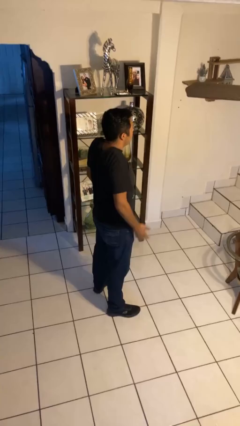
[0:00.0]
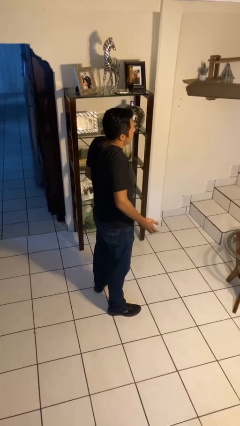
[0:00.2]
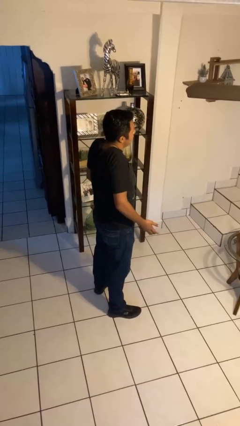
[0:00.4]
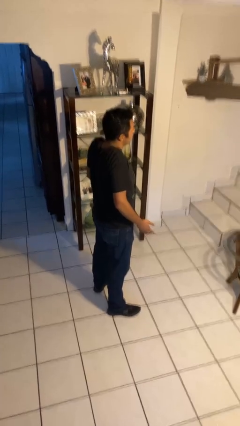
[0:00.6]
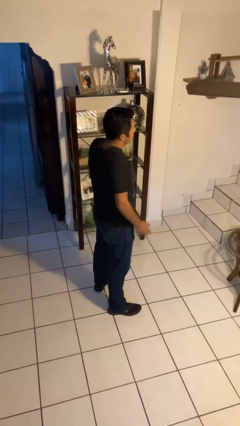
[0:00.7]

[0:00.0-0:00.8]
person shrugs

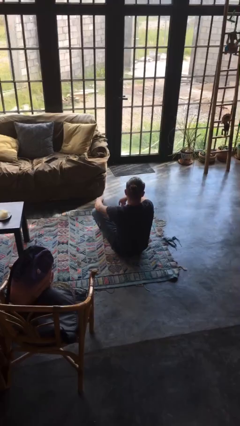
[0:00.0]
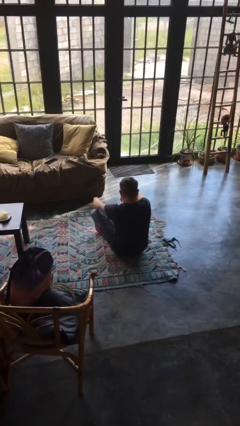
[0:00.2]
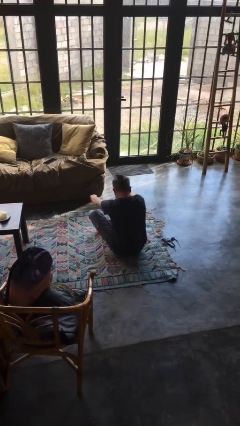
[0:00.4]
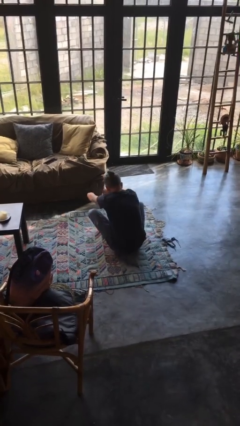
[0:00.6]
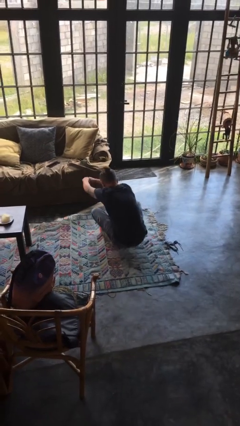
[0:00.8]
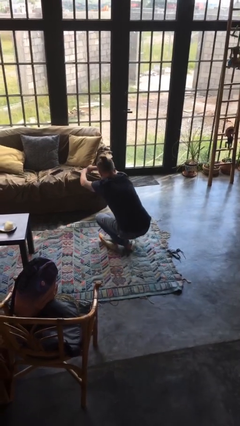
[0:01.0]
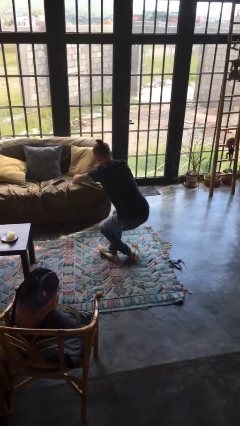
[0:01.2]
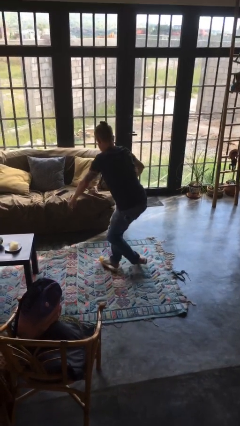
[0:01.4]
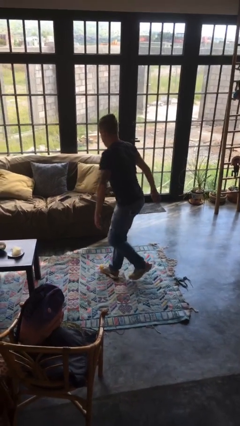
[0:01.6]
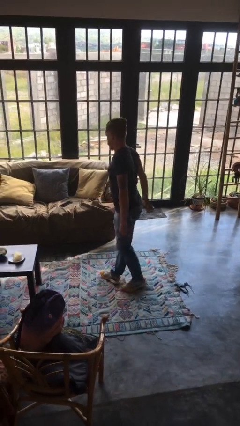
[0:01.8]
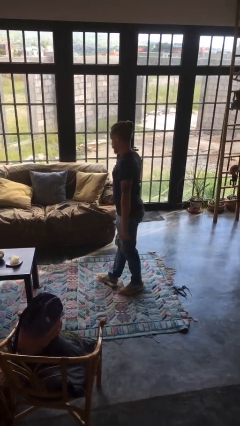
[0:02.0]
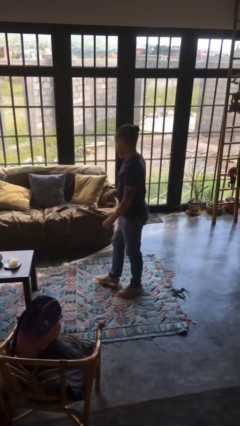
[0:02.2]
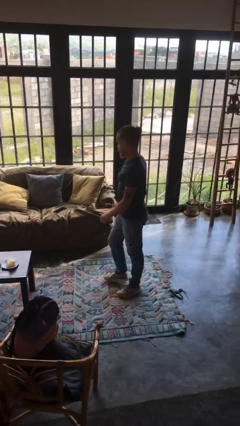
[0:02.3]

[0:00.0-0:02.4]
person stands up from floor

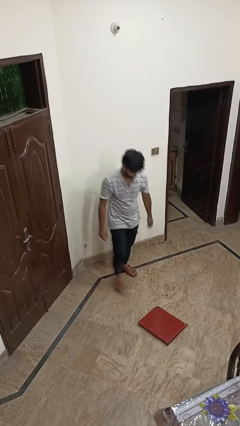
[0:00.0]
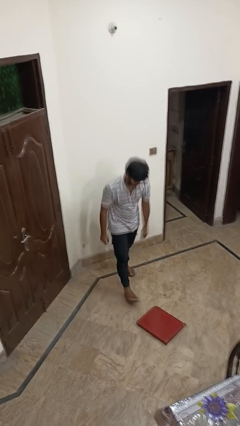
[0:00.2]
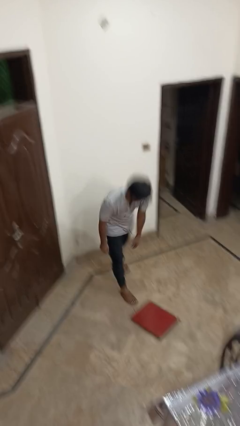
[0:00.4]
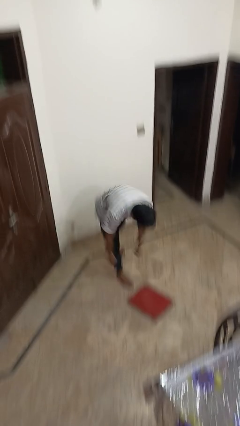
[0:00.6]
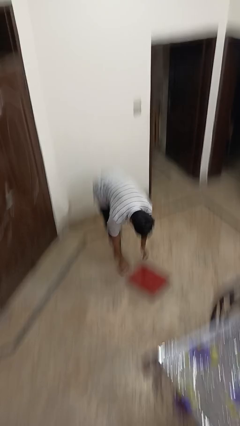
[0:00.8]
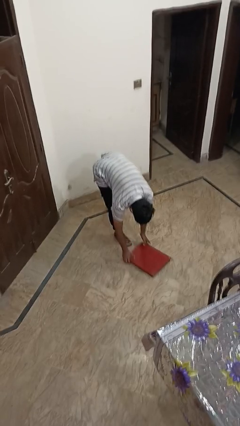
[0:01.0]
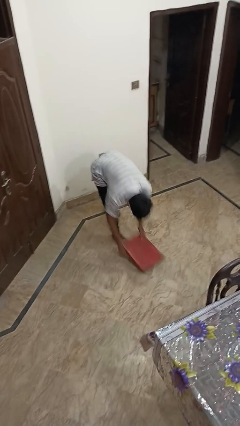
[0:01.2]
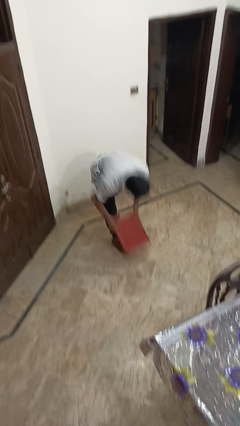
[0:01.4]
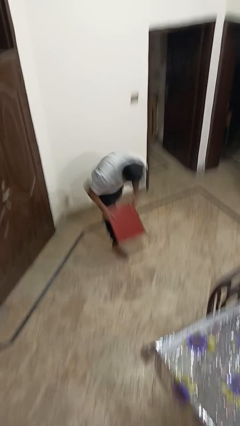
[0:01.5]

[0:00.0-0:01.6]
person picks up object from floor

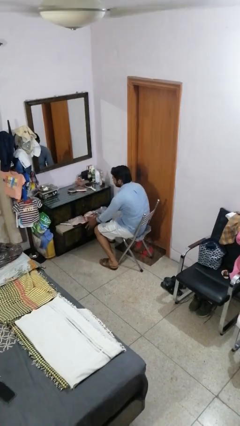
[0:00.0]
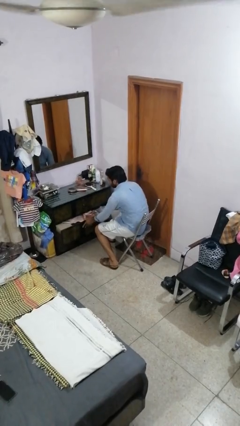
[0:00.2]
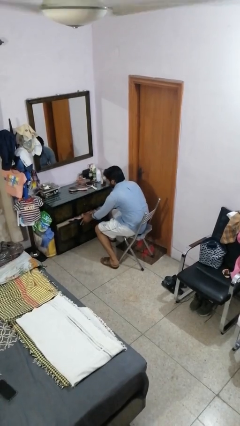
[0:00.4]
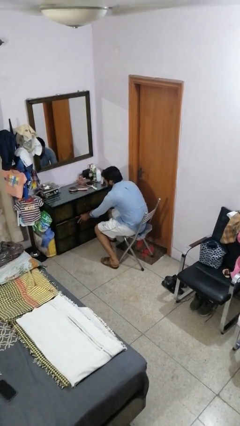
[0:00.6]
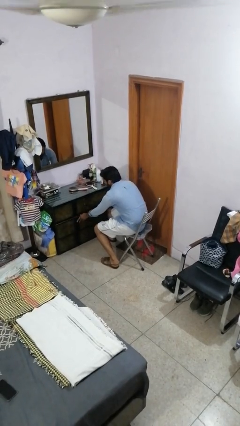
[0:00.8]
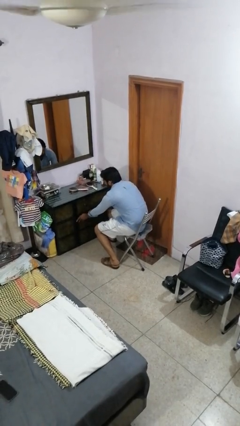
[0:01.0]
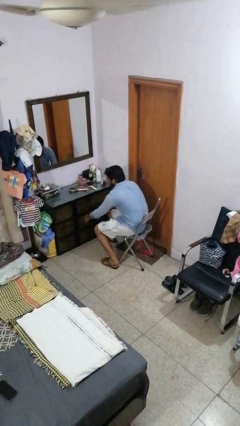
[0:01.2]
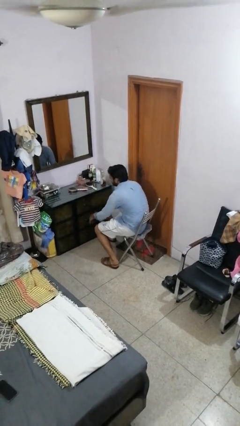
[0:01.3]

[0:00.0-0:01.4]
person closes dresser drawer

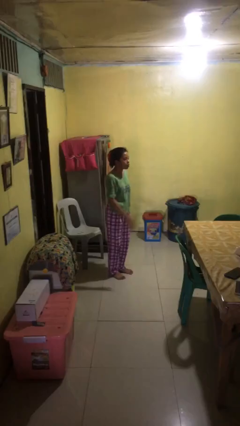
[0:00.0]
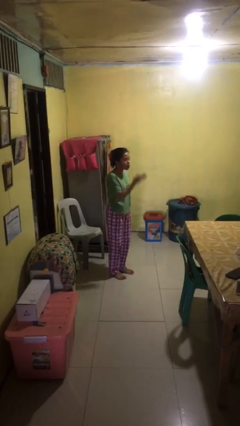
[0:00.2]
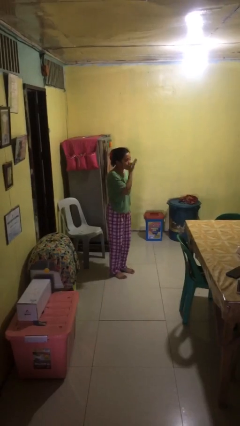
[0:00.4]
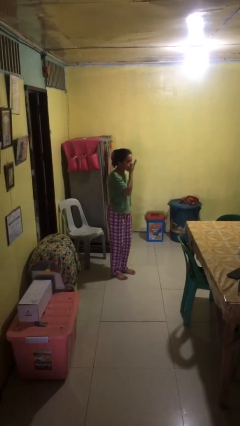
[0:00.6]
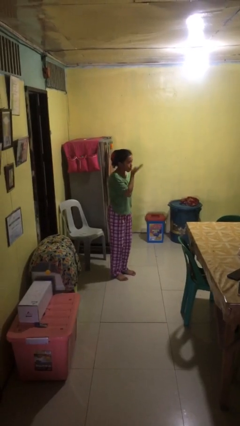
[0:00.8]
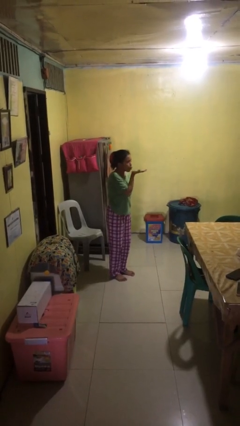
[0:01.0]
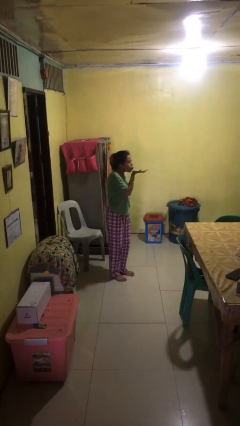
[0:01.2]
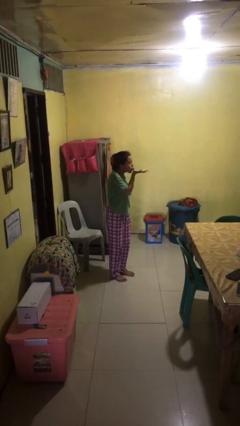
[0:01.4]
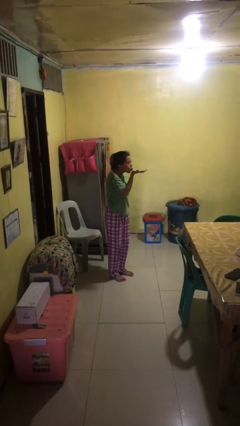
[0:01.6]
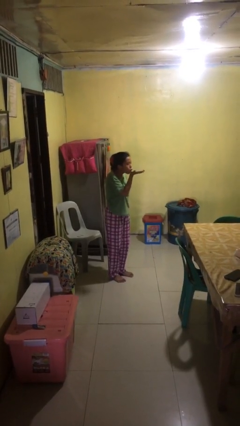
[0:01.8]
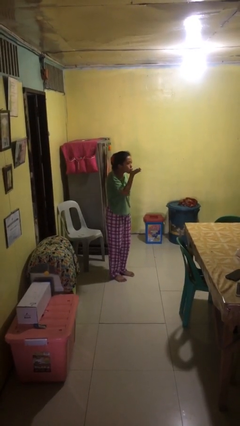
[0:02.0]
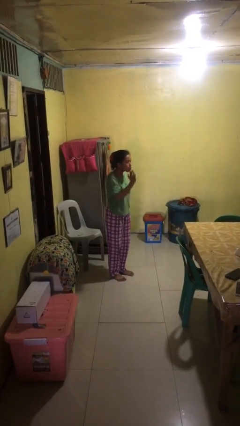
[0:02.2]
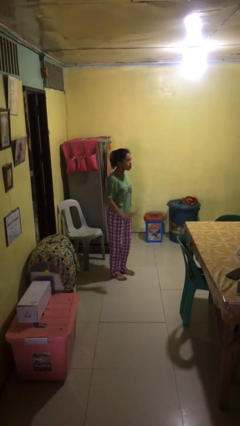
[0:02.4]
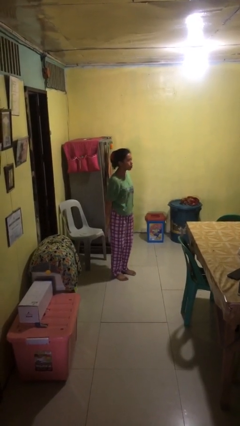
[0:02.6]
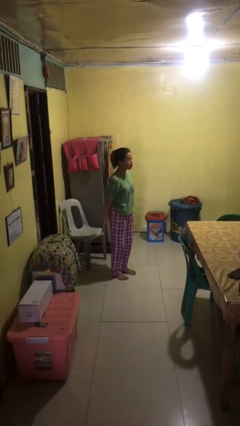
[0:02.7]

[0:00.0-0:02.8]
person gestures blow kiss

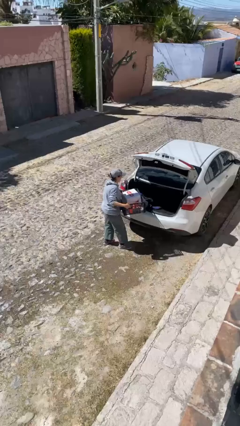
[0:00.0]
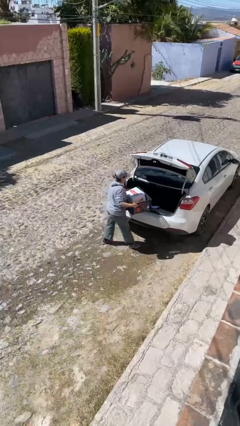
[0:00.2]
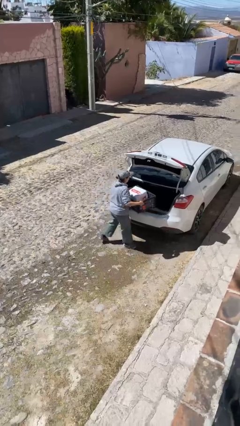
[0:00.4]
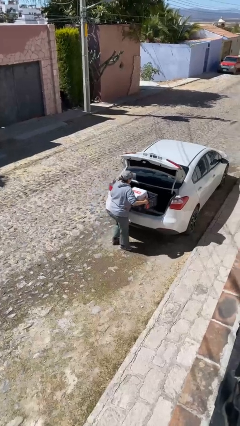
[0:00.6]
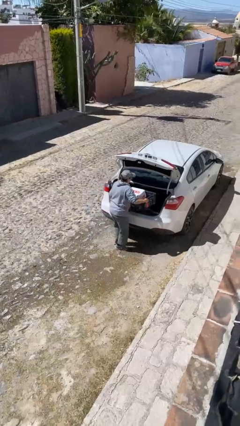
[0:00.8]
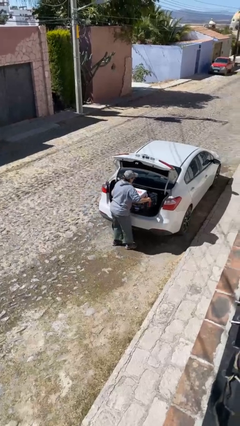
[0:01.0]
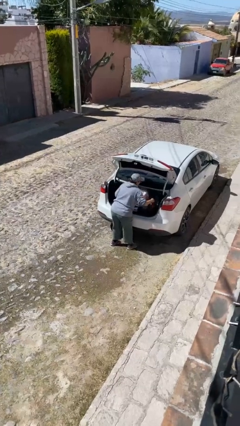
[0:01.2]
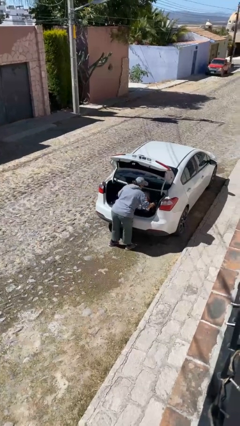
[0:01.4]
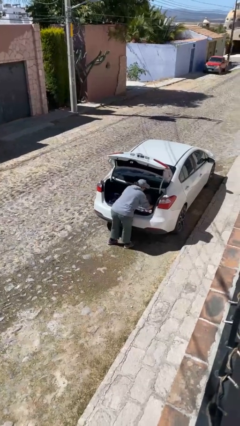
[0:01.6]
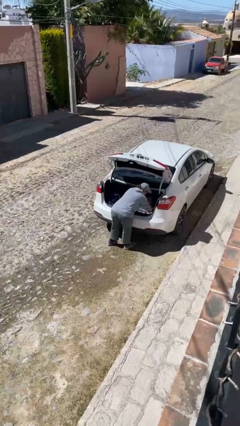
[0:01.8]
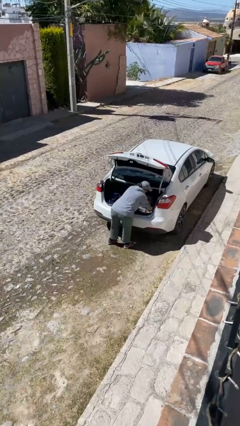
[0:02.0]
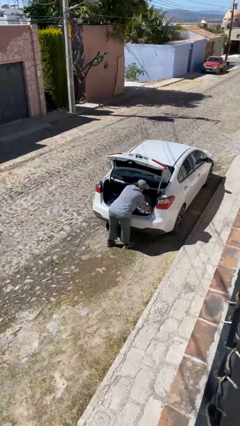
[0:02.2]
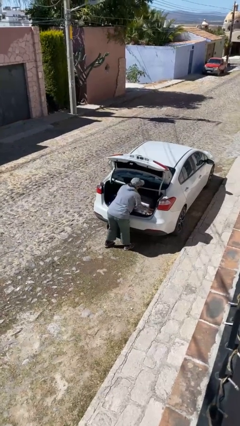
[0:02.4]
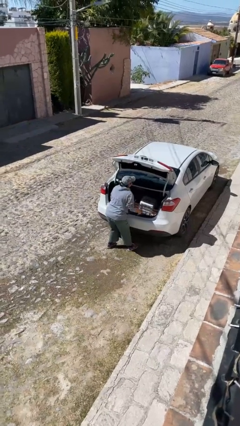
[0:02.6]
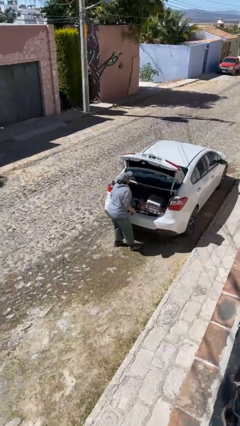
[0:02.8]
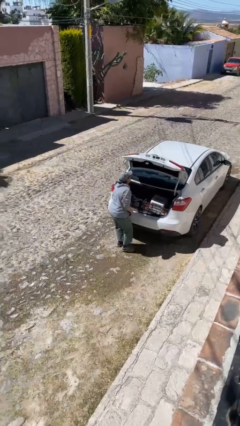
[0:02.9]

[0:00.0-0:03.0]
person loads car

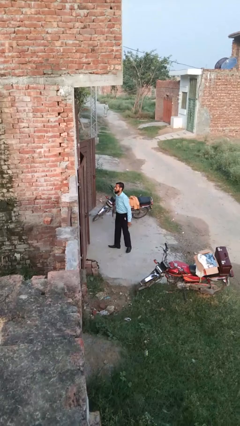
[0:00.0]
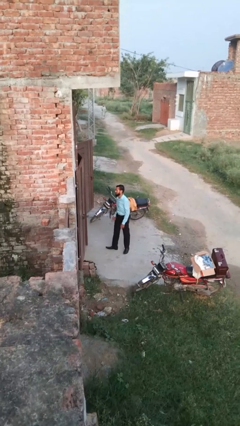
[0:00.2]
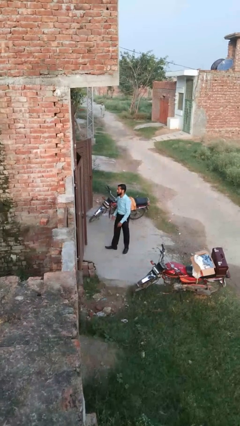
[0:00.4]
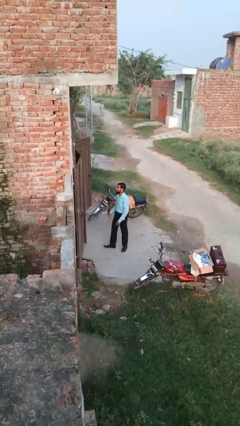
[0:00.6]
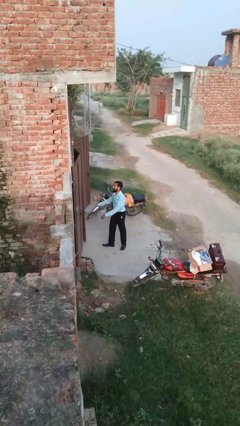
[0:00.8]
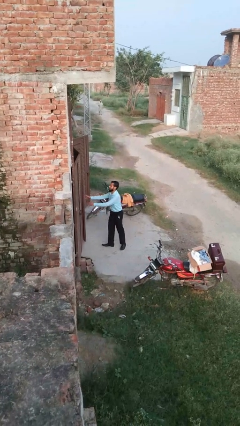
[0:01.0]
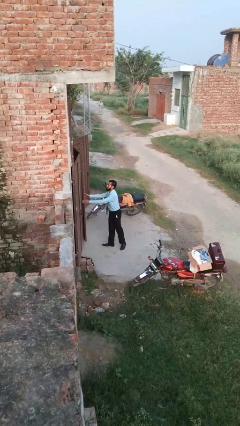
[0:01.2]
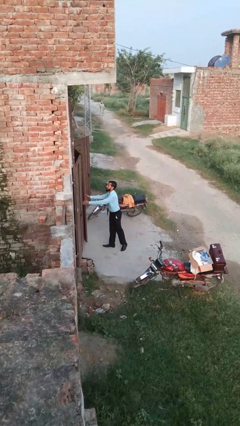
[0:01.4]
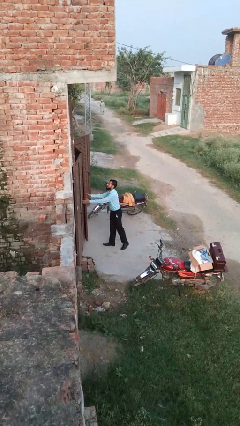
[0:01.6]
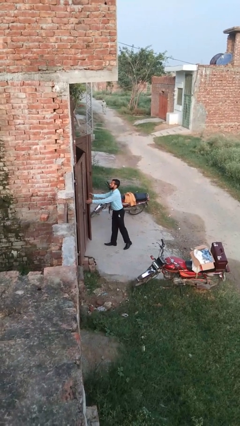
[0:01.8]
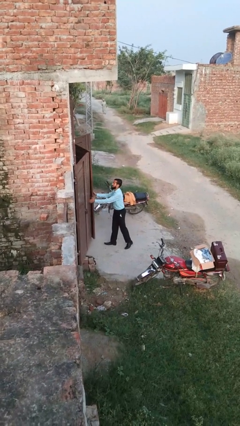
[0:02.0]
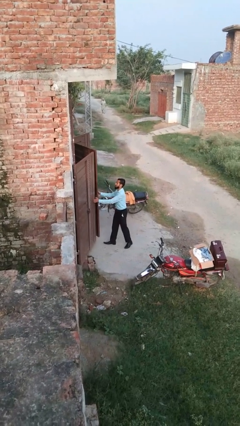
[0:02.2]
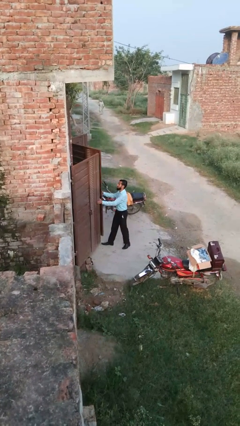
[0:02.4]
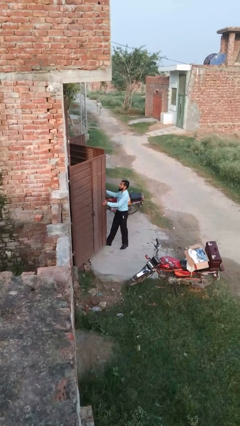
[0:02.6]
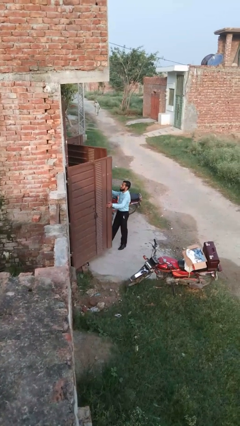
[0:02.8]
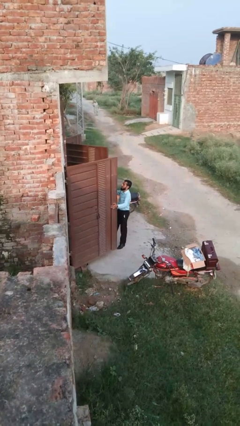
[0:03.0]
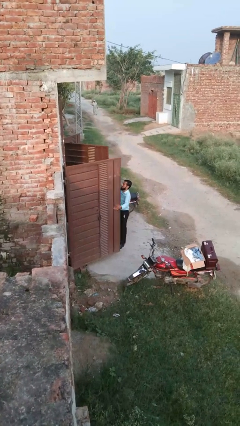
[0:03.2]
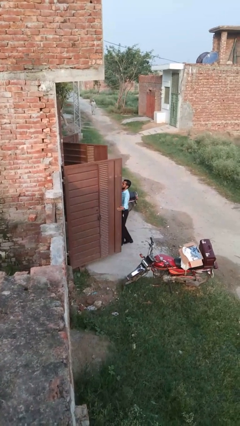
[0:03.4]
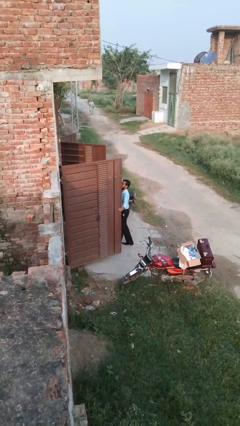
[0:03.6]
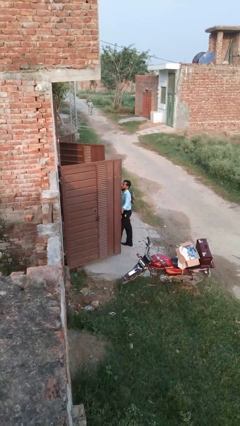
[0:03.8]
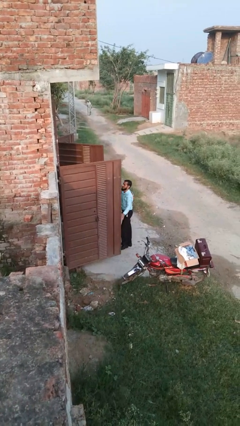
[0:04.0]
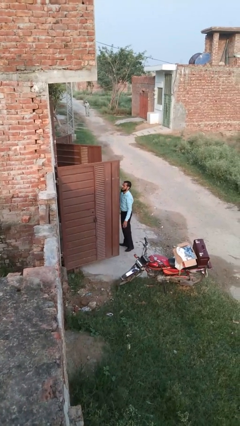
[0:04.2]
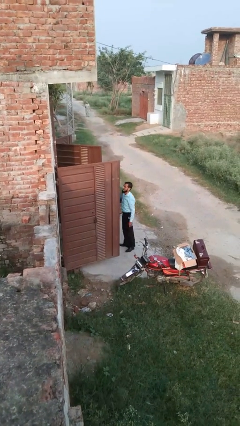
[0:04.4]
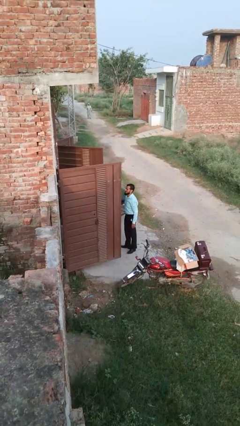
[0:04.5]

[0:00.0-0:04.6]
person opens gate
